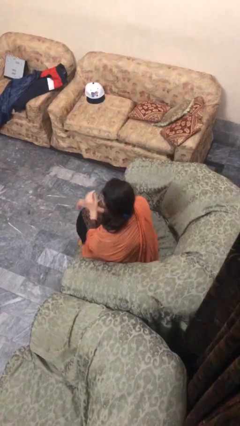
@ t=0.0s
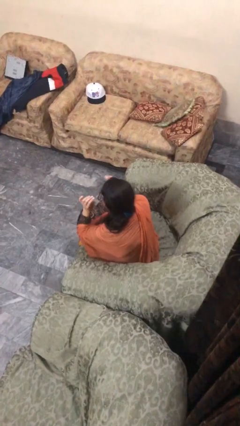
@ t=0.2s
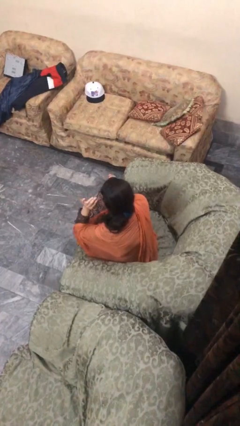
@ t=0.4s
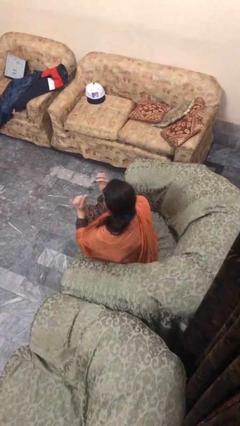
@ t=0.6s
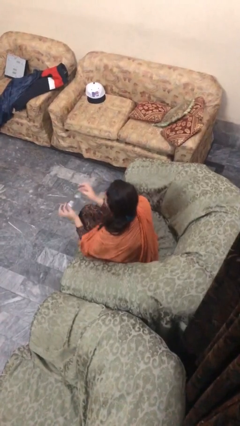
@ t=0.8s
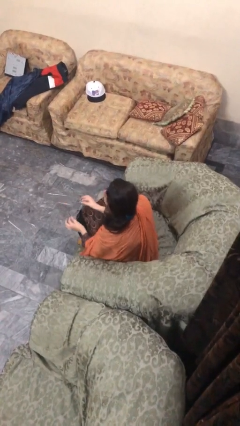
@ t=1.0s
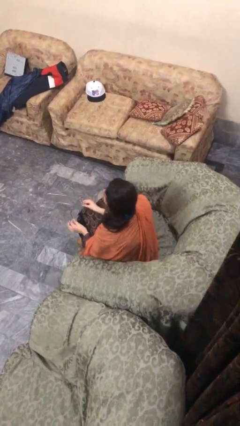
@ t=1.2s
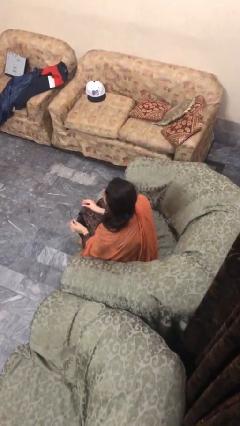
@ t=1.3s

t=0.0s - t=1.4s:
person takes off glasses

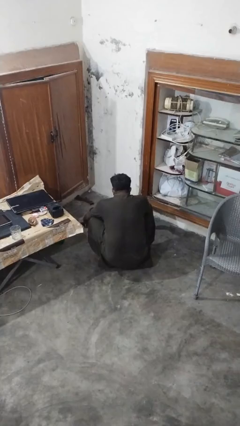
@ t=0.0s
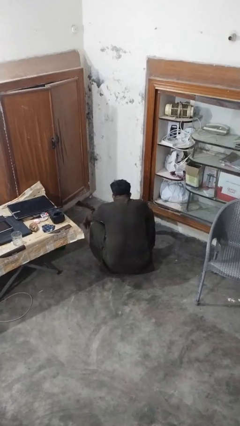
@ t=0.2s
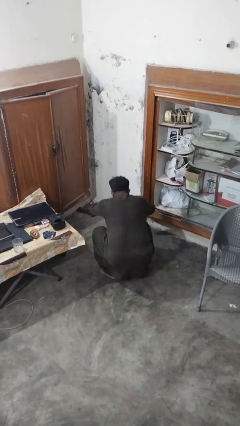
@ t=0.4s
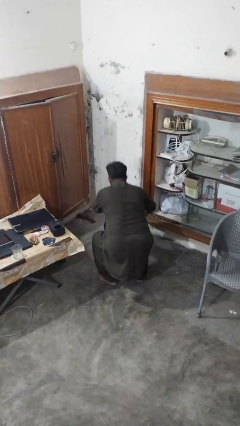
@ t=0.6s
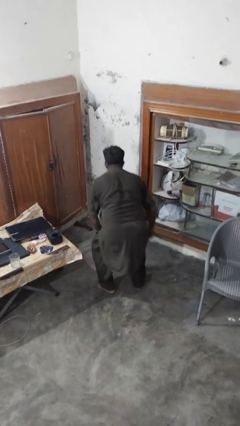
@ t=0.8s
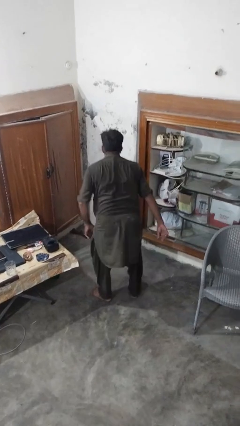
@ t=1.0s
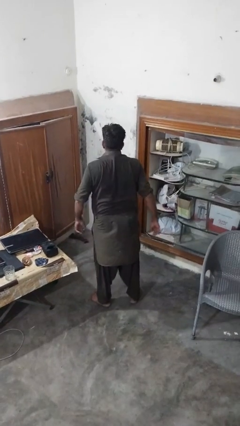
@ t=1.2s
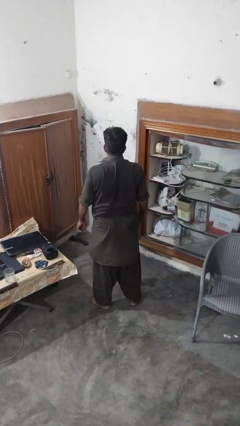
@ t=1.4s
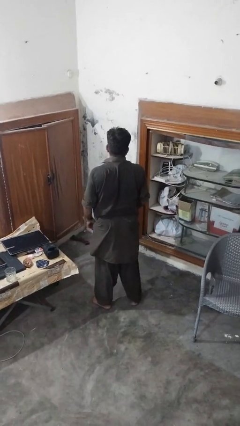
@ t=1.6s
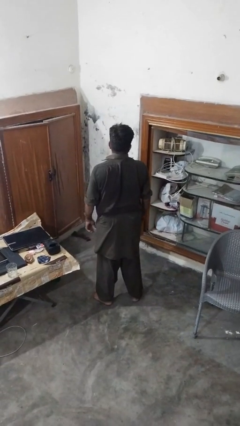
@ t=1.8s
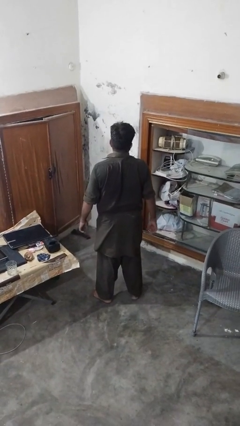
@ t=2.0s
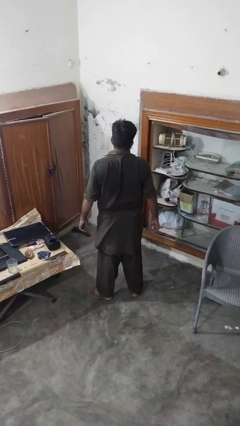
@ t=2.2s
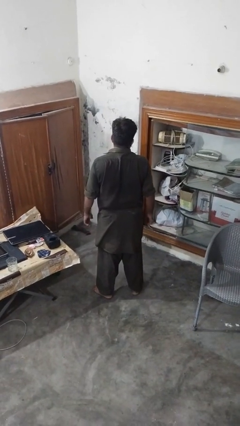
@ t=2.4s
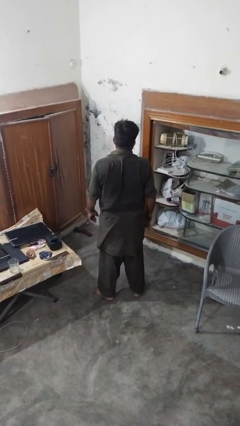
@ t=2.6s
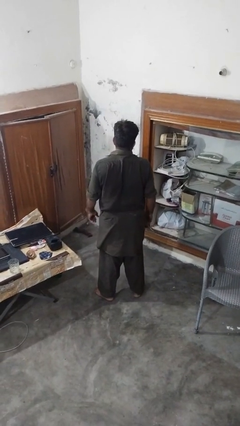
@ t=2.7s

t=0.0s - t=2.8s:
person stands up

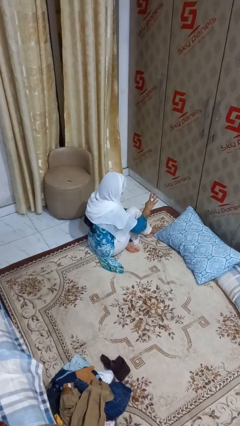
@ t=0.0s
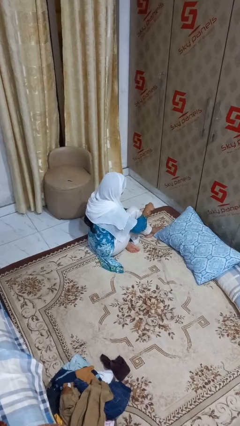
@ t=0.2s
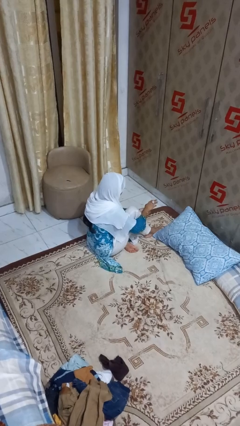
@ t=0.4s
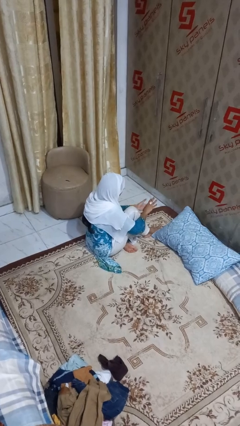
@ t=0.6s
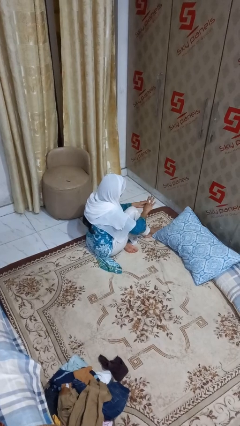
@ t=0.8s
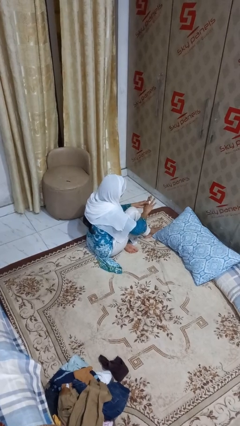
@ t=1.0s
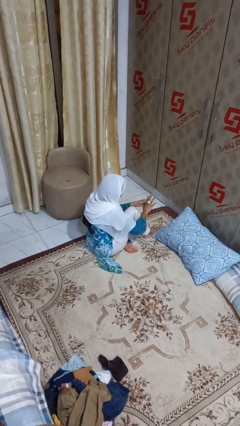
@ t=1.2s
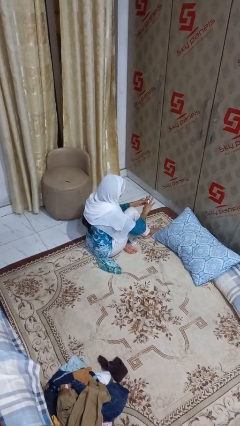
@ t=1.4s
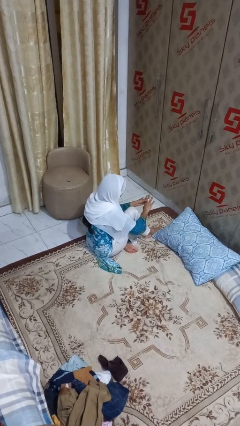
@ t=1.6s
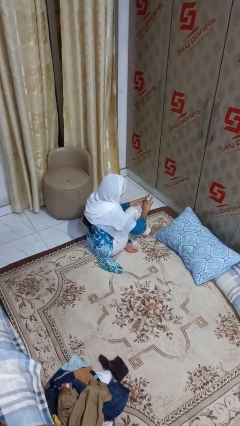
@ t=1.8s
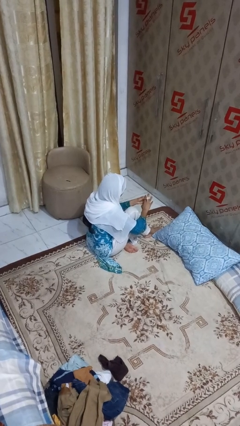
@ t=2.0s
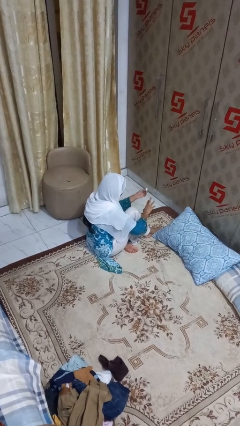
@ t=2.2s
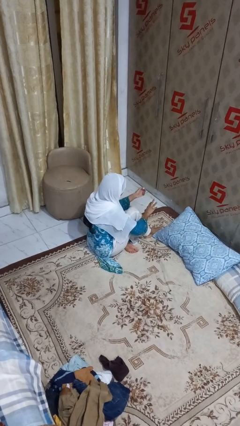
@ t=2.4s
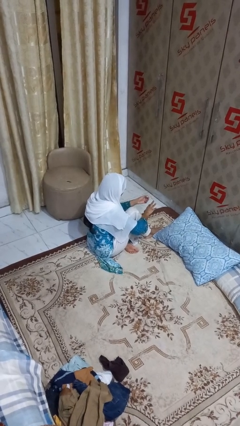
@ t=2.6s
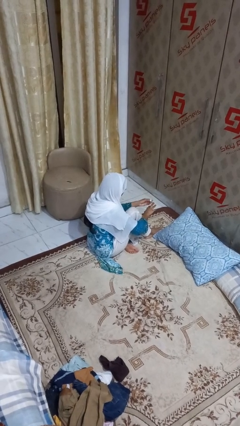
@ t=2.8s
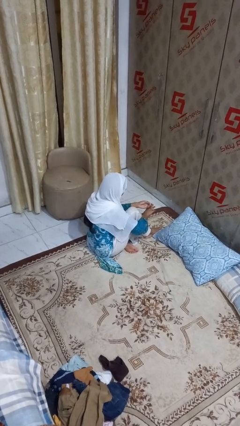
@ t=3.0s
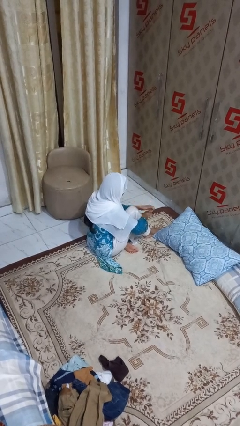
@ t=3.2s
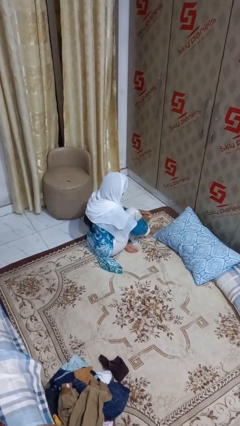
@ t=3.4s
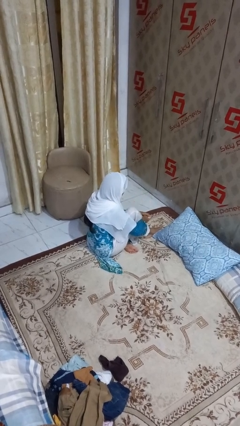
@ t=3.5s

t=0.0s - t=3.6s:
person takes off ring

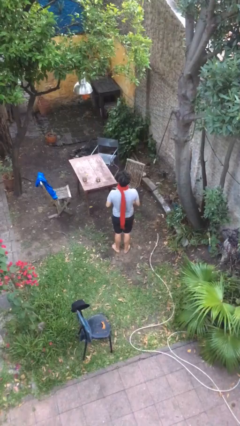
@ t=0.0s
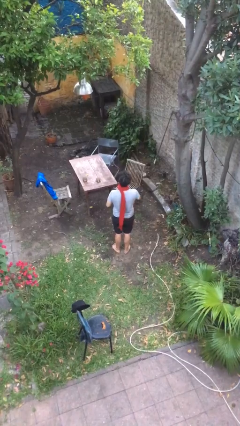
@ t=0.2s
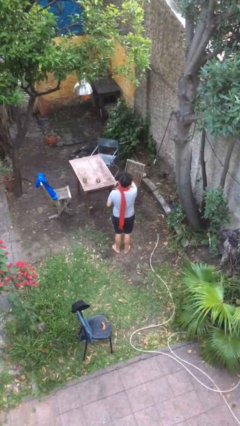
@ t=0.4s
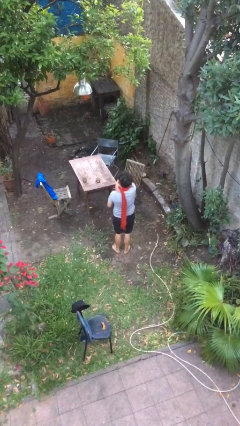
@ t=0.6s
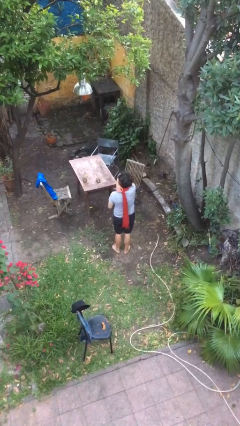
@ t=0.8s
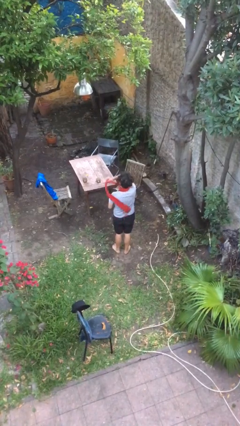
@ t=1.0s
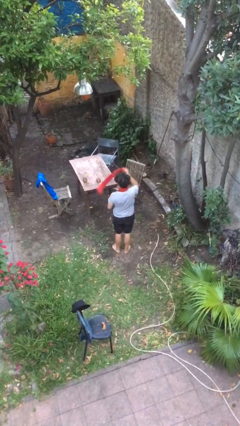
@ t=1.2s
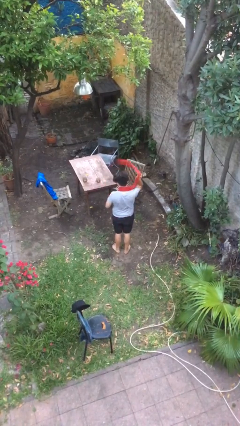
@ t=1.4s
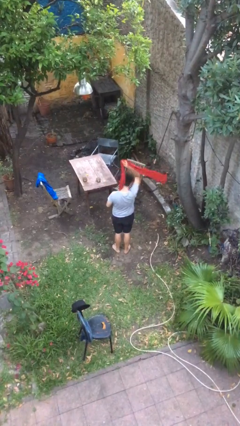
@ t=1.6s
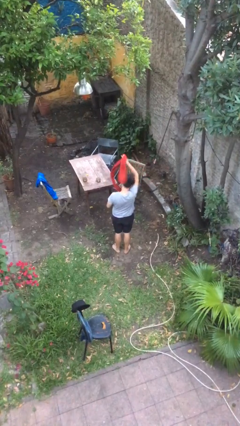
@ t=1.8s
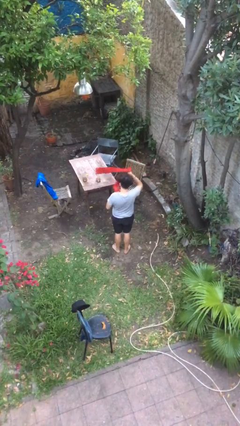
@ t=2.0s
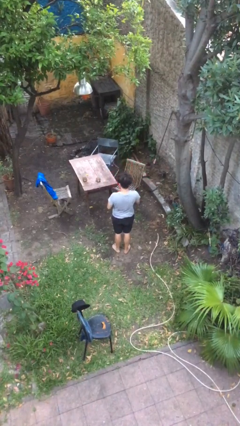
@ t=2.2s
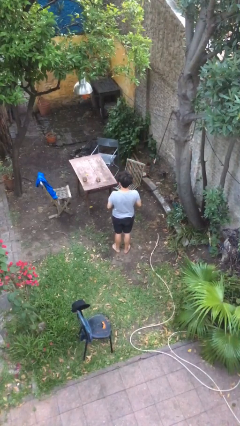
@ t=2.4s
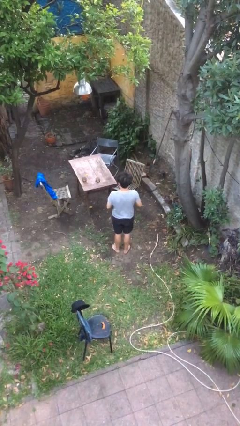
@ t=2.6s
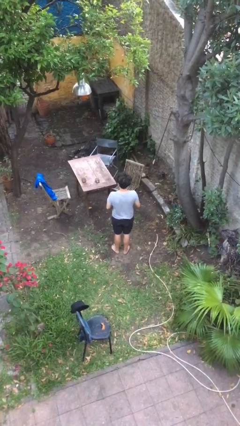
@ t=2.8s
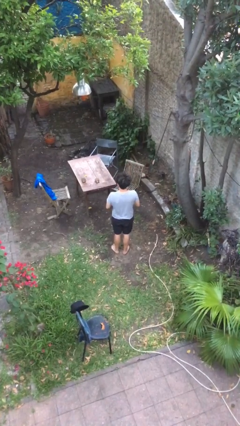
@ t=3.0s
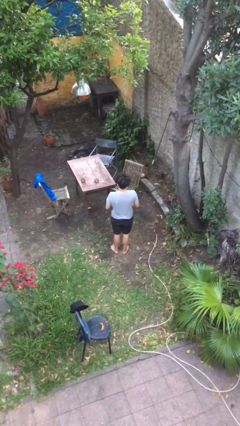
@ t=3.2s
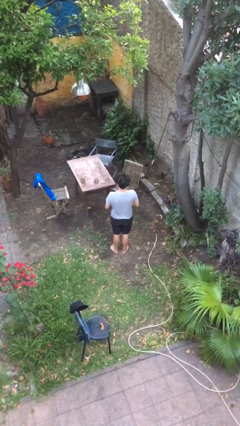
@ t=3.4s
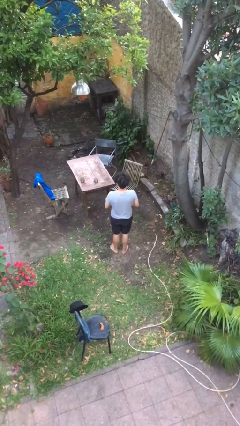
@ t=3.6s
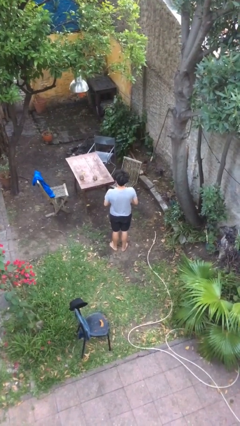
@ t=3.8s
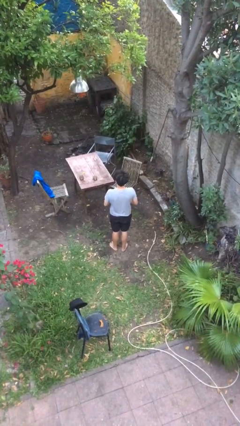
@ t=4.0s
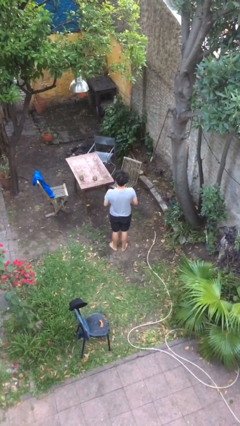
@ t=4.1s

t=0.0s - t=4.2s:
person takes off scarf

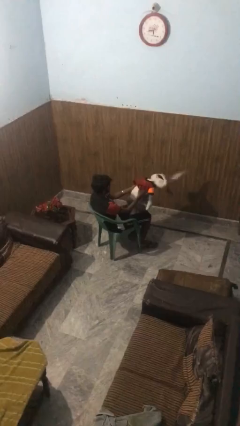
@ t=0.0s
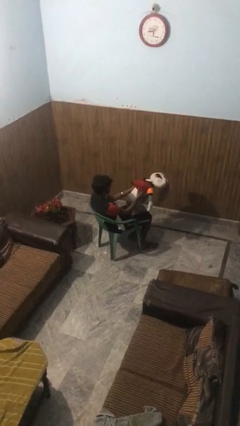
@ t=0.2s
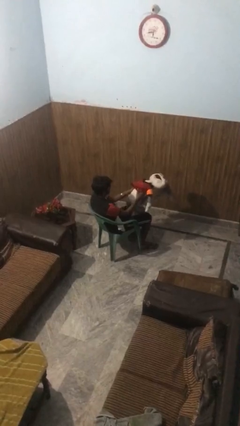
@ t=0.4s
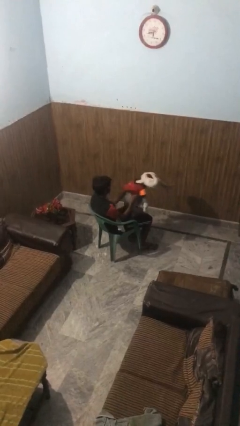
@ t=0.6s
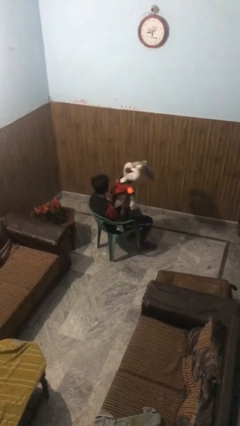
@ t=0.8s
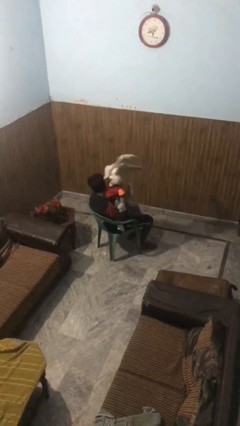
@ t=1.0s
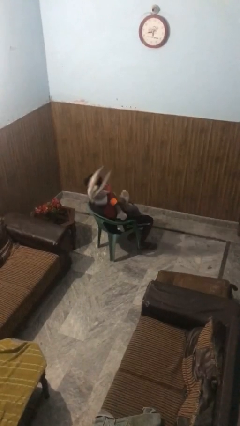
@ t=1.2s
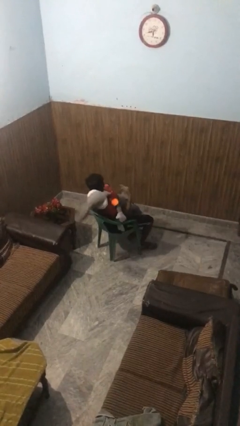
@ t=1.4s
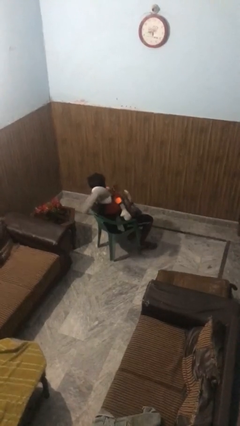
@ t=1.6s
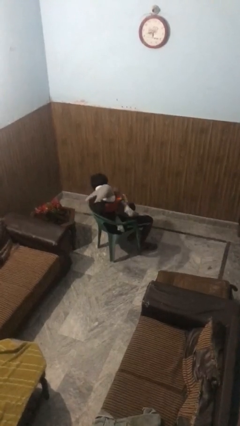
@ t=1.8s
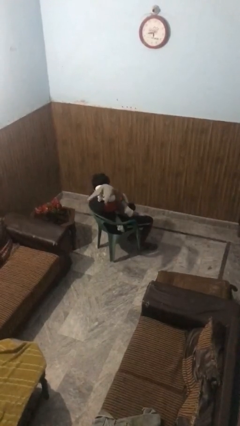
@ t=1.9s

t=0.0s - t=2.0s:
person hugs stuffed animal

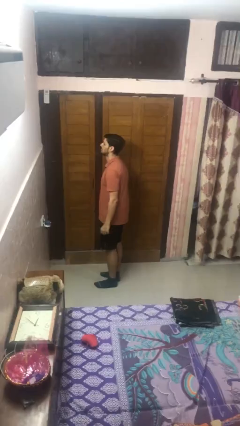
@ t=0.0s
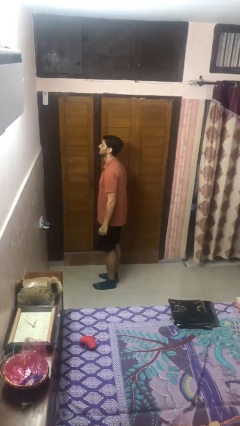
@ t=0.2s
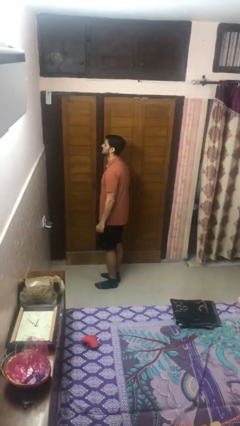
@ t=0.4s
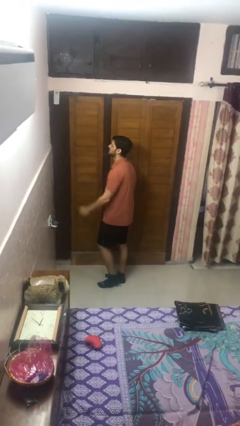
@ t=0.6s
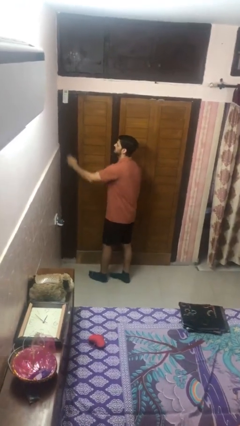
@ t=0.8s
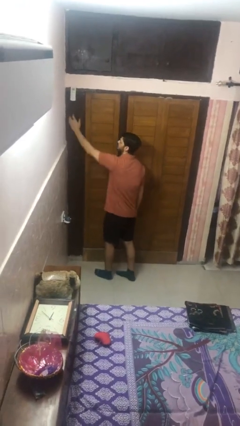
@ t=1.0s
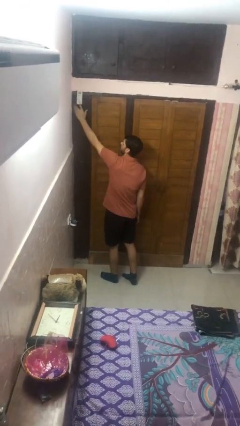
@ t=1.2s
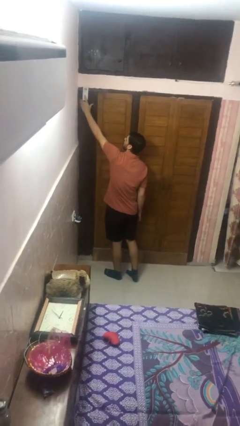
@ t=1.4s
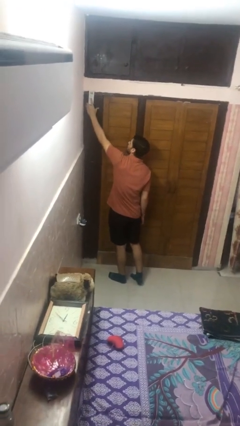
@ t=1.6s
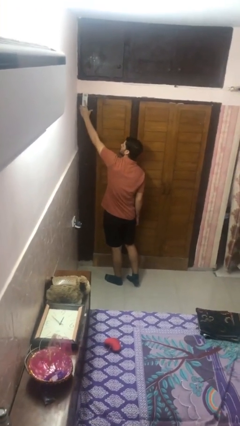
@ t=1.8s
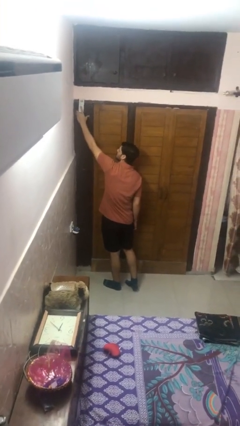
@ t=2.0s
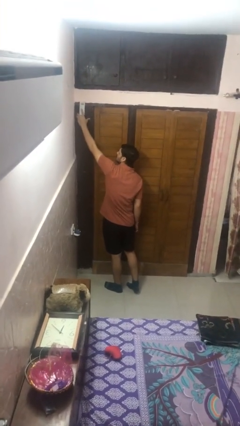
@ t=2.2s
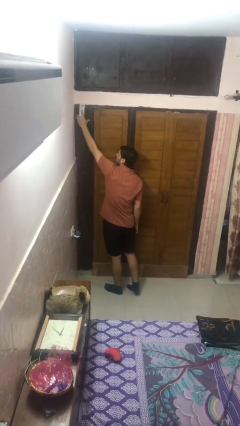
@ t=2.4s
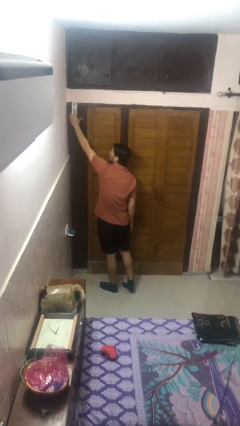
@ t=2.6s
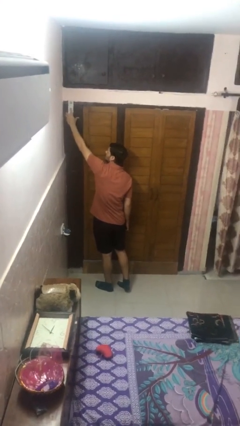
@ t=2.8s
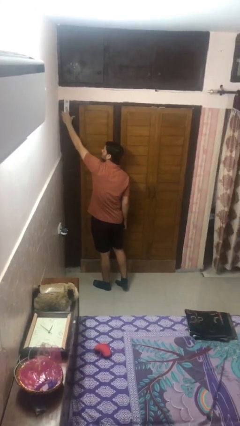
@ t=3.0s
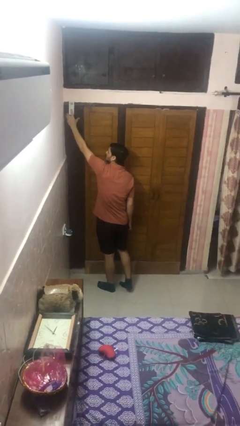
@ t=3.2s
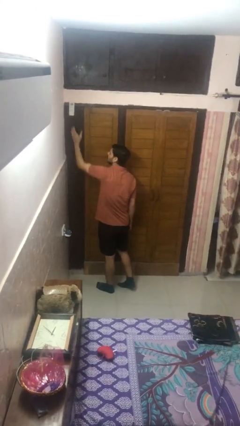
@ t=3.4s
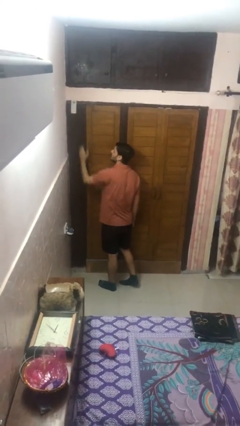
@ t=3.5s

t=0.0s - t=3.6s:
person adjusts thermostat
